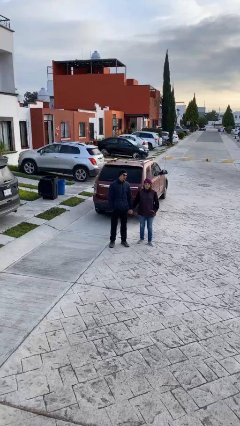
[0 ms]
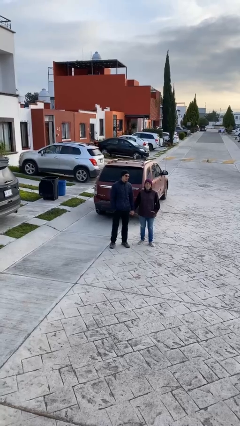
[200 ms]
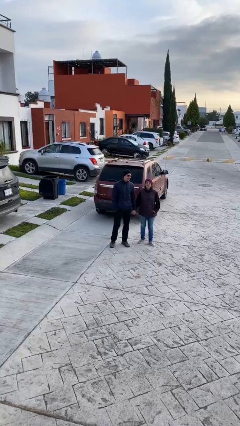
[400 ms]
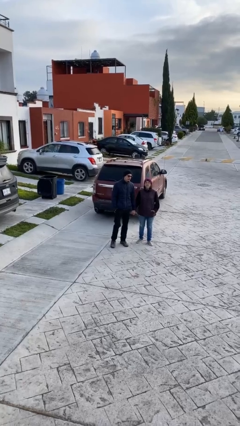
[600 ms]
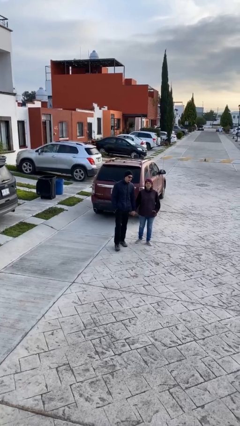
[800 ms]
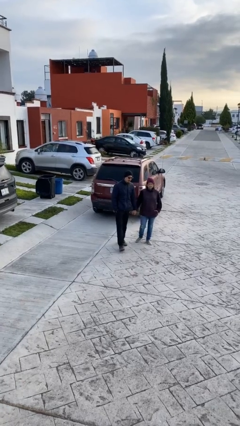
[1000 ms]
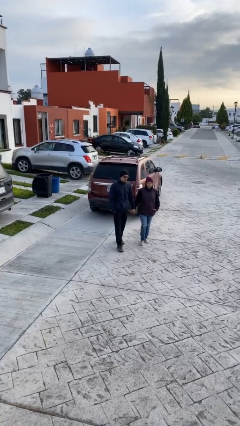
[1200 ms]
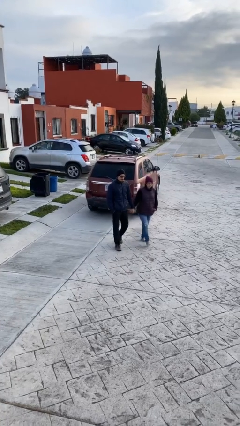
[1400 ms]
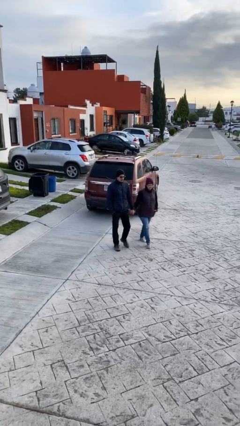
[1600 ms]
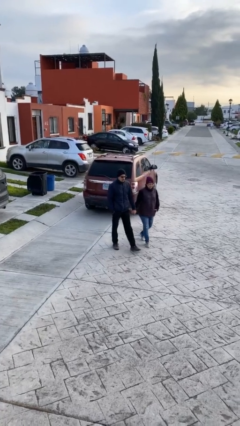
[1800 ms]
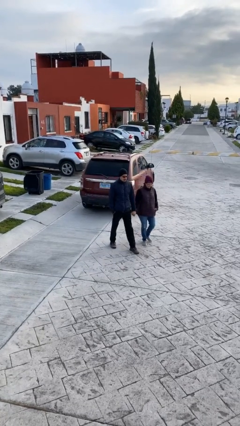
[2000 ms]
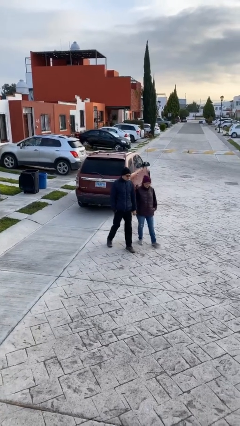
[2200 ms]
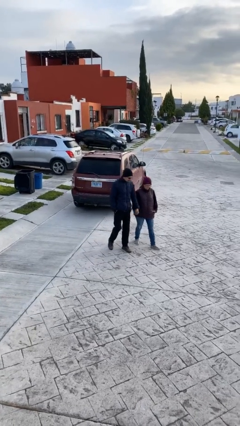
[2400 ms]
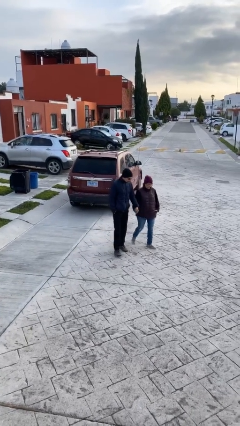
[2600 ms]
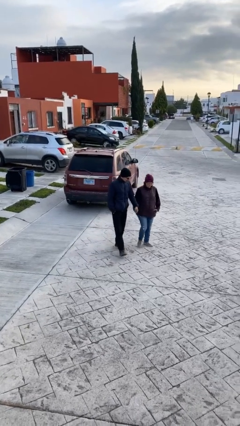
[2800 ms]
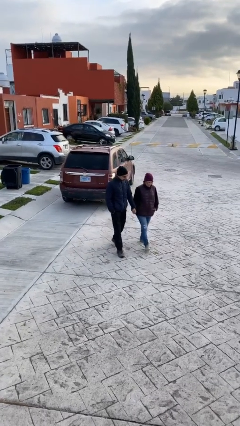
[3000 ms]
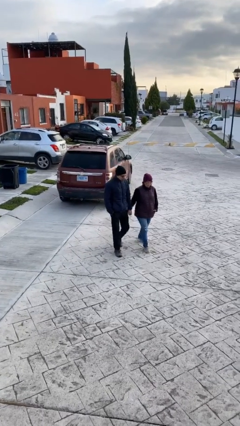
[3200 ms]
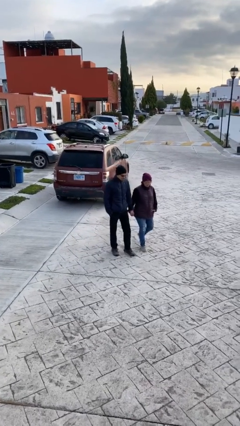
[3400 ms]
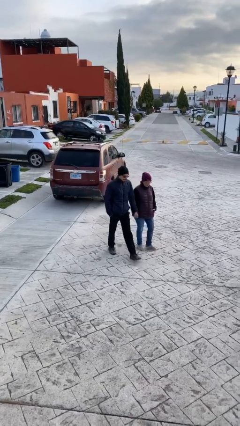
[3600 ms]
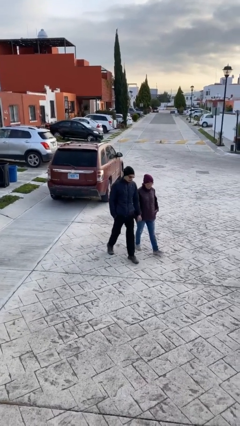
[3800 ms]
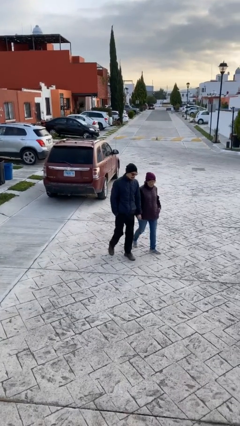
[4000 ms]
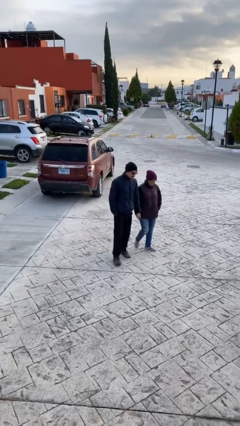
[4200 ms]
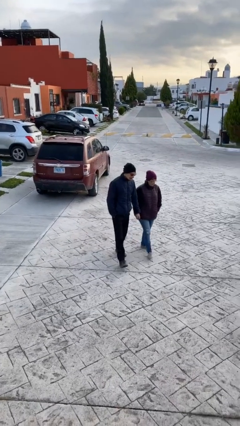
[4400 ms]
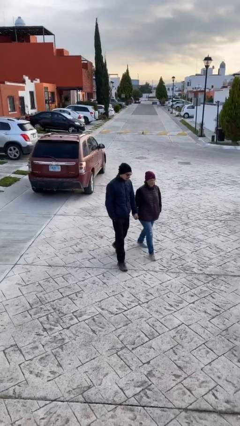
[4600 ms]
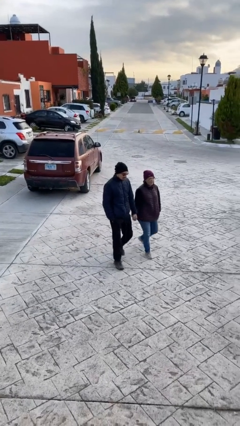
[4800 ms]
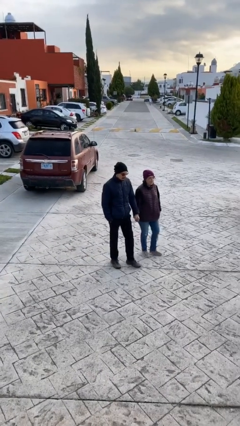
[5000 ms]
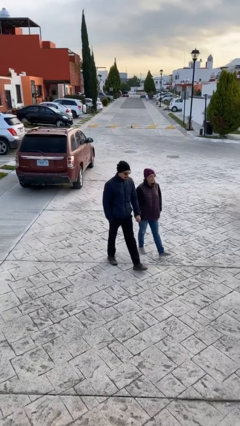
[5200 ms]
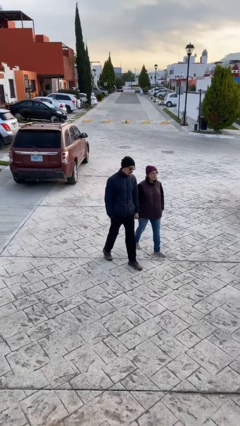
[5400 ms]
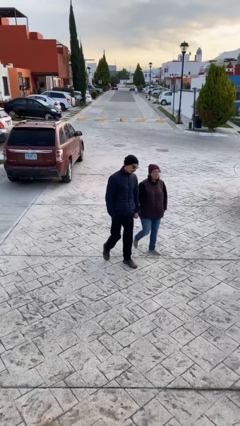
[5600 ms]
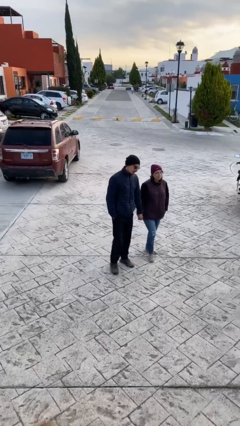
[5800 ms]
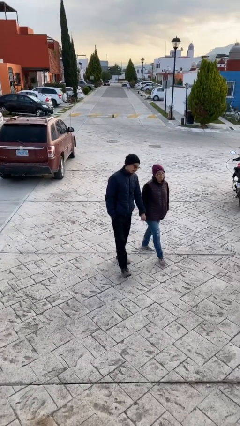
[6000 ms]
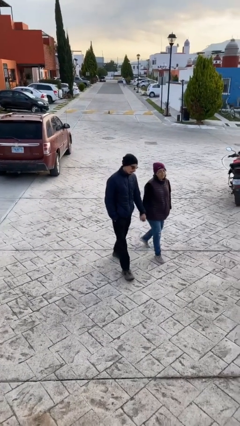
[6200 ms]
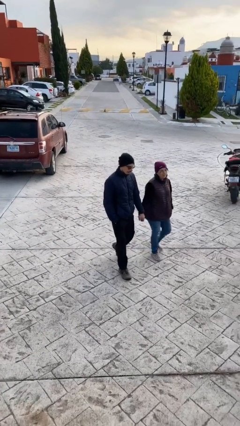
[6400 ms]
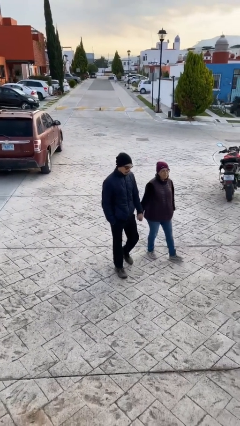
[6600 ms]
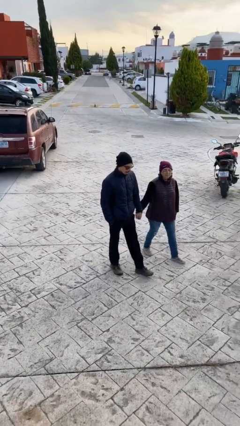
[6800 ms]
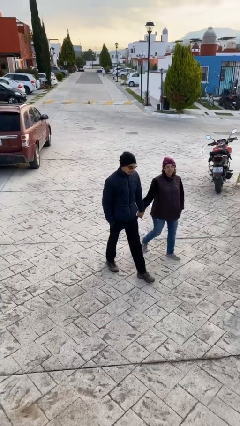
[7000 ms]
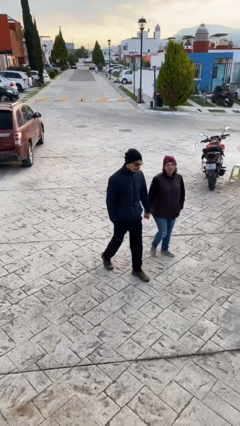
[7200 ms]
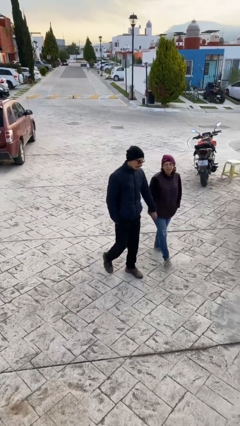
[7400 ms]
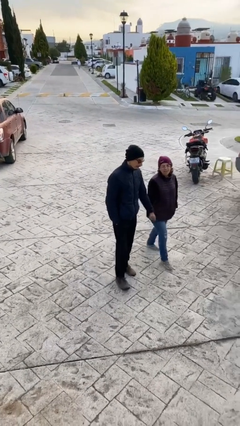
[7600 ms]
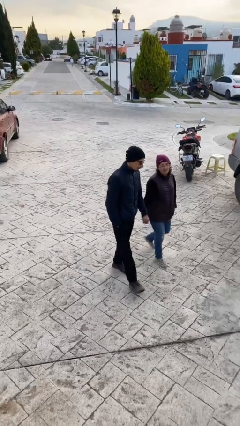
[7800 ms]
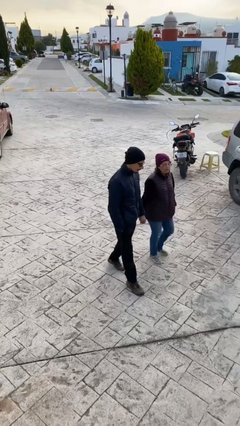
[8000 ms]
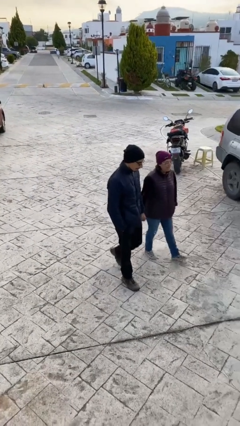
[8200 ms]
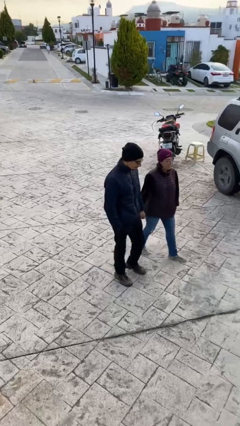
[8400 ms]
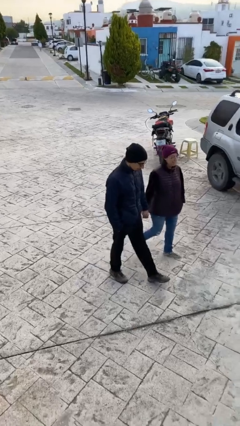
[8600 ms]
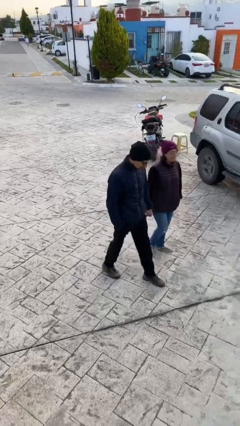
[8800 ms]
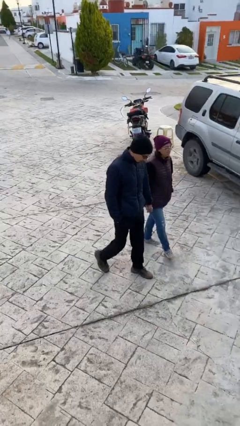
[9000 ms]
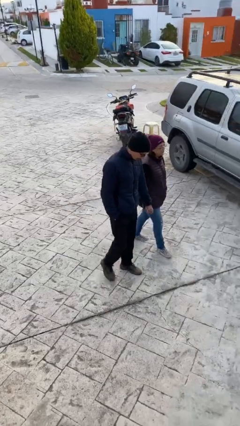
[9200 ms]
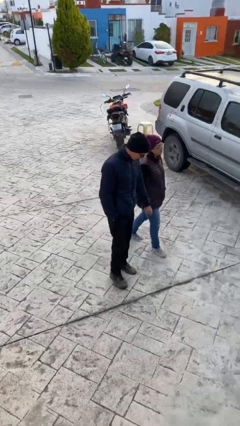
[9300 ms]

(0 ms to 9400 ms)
person holds hand

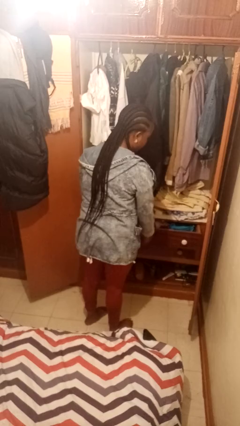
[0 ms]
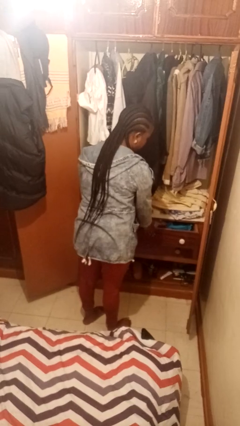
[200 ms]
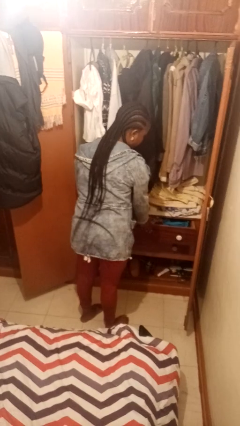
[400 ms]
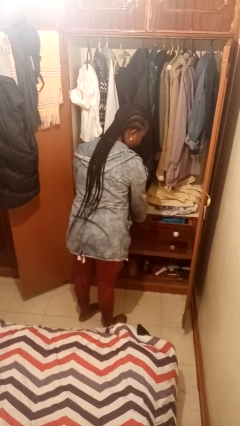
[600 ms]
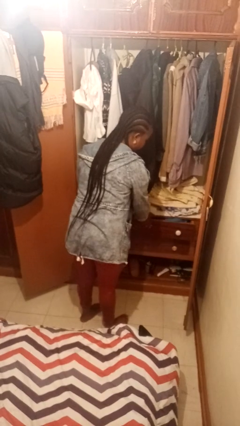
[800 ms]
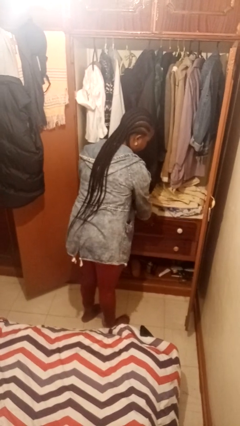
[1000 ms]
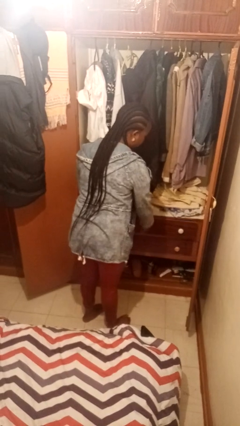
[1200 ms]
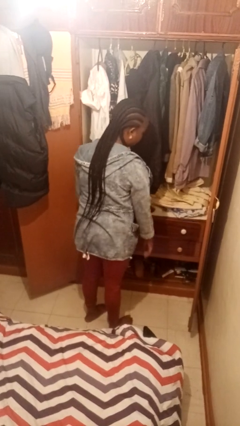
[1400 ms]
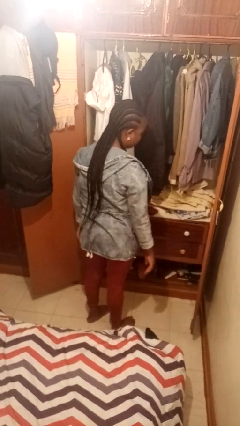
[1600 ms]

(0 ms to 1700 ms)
person closes dresser drawer

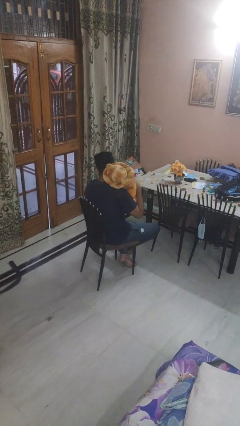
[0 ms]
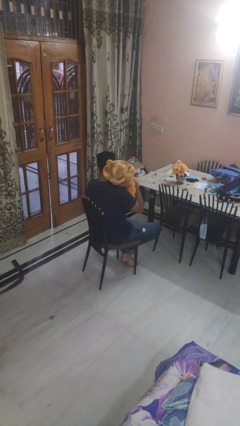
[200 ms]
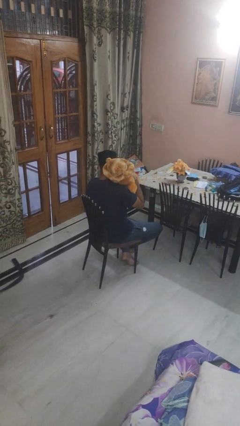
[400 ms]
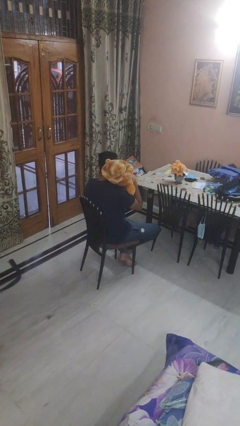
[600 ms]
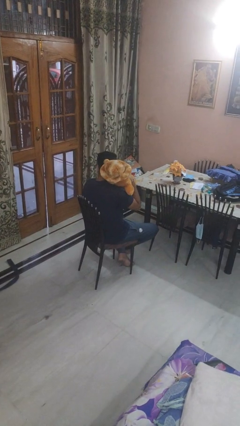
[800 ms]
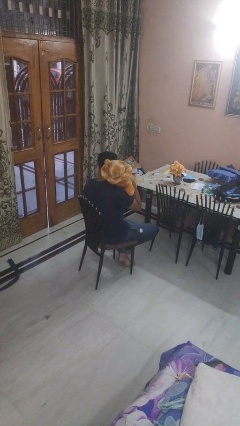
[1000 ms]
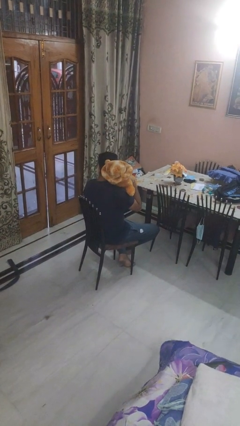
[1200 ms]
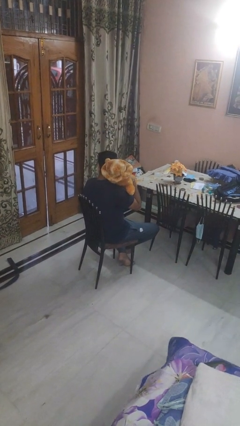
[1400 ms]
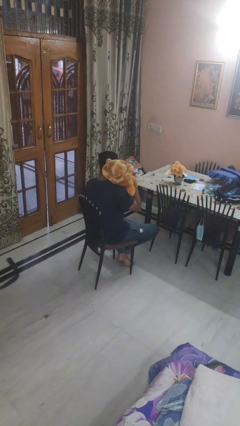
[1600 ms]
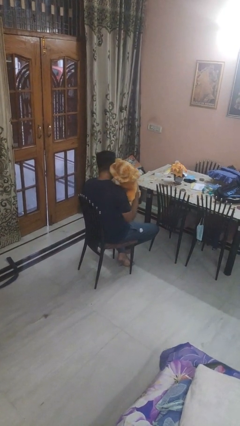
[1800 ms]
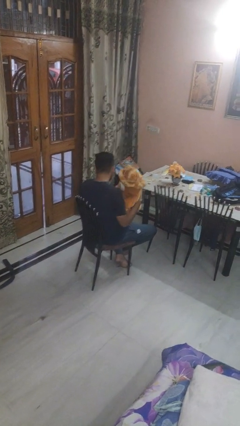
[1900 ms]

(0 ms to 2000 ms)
person hugs stuffed animal

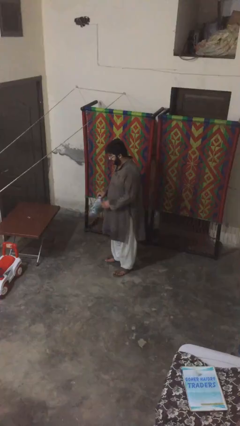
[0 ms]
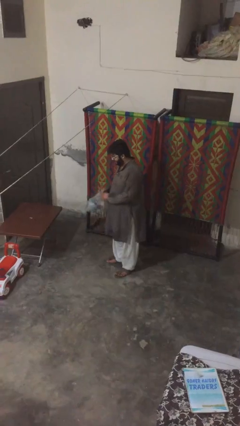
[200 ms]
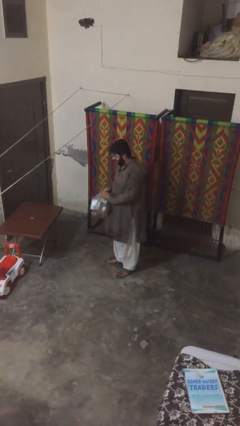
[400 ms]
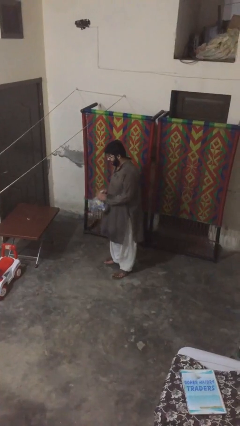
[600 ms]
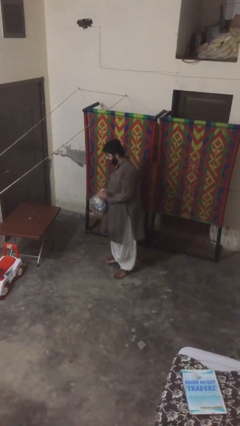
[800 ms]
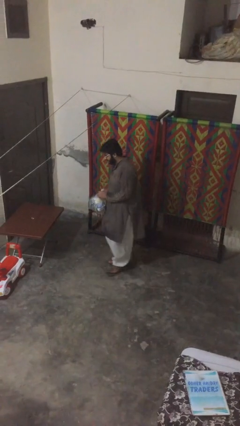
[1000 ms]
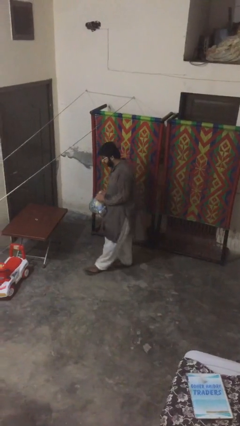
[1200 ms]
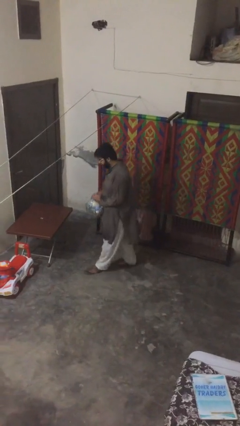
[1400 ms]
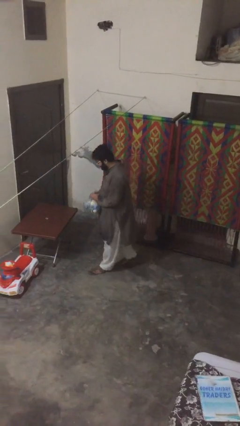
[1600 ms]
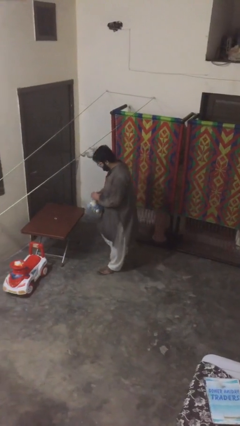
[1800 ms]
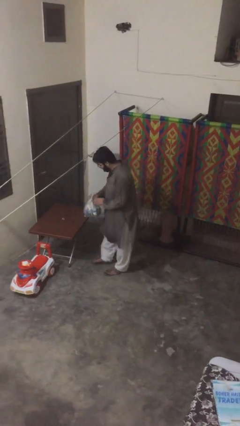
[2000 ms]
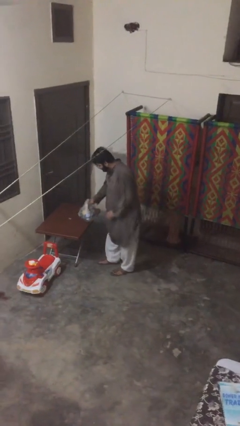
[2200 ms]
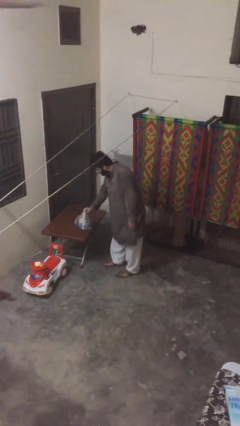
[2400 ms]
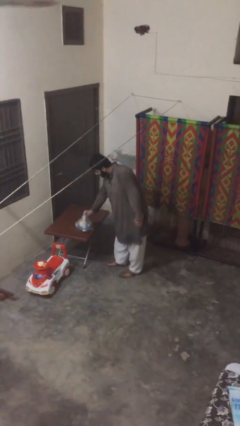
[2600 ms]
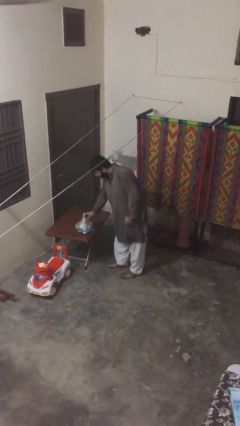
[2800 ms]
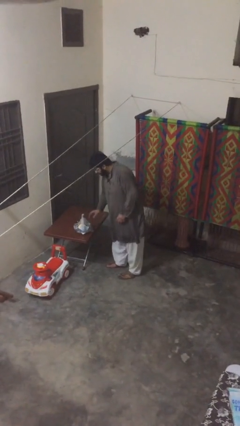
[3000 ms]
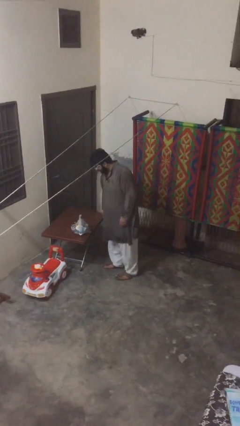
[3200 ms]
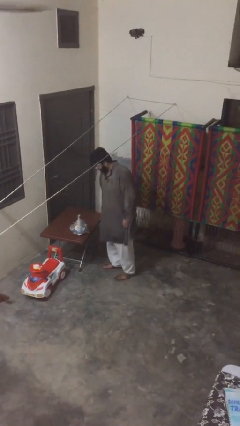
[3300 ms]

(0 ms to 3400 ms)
person puts down object on table

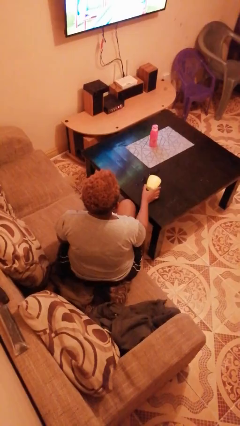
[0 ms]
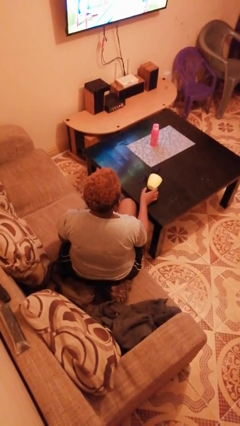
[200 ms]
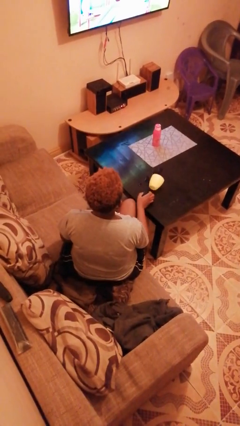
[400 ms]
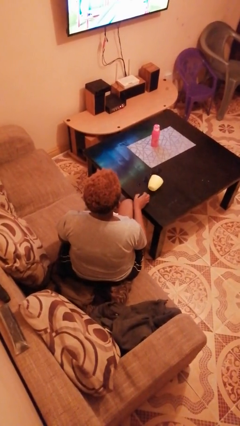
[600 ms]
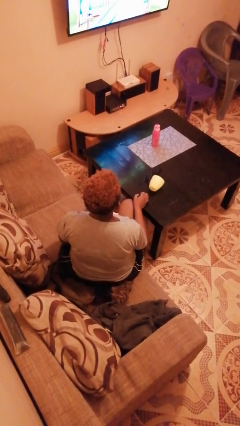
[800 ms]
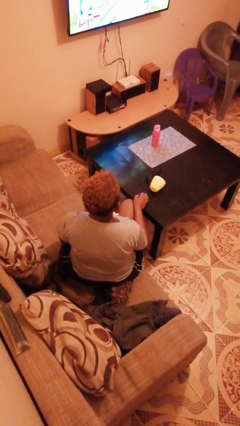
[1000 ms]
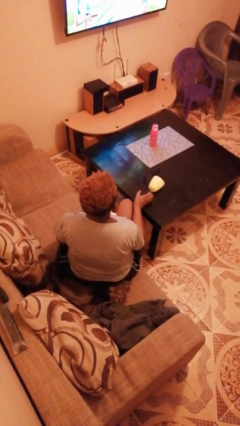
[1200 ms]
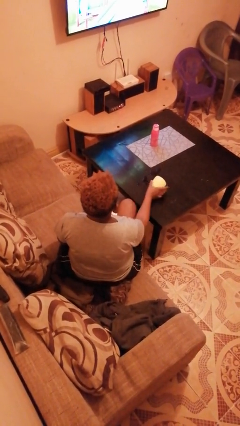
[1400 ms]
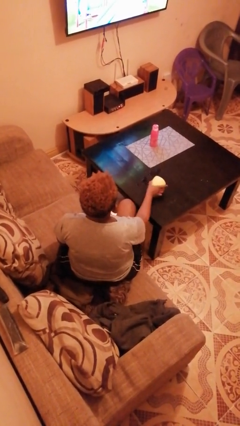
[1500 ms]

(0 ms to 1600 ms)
person sets upright glass
